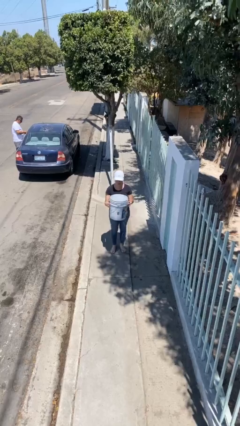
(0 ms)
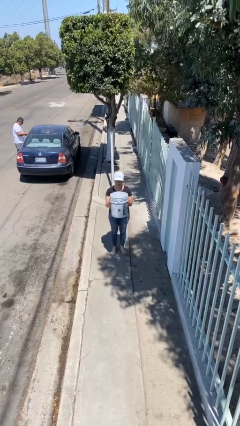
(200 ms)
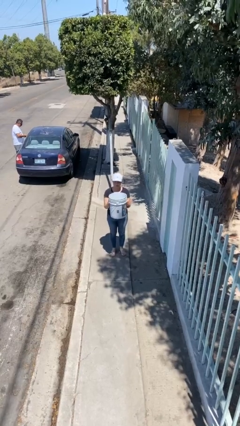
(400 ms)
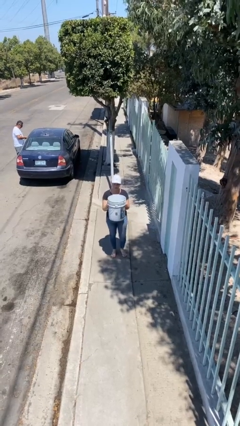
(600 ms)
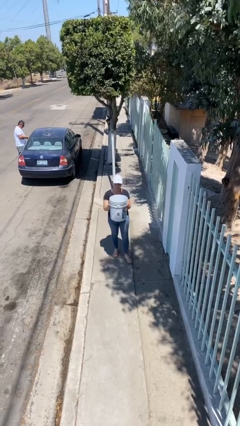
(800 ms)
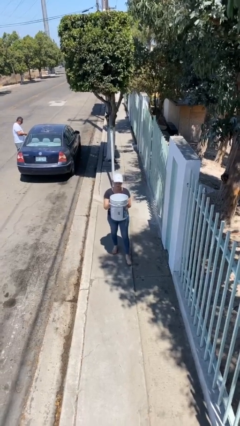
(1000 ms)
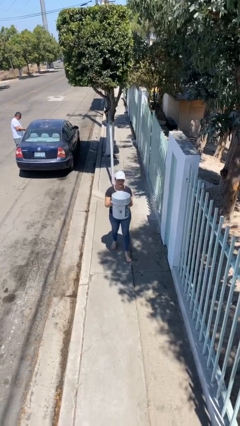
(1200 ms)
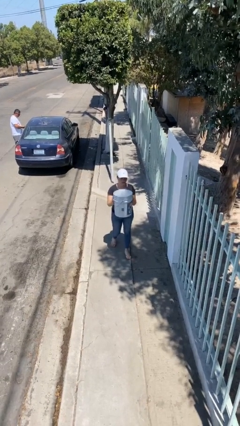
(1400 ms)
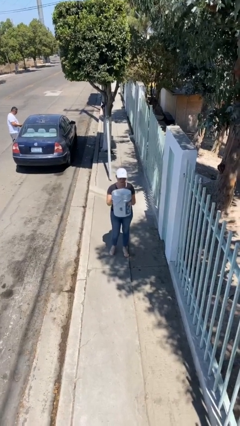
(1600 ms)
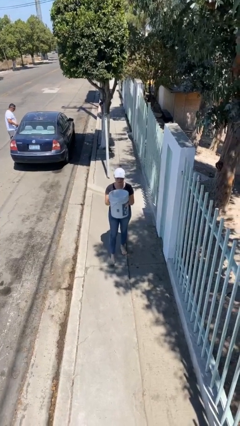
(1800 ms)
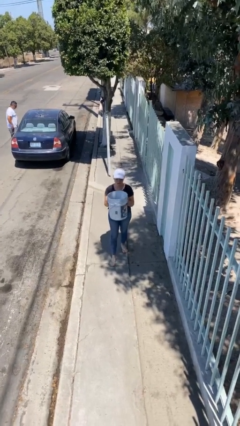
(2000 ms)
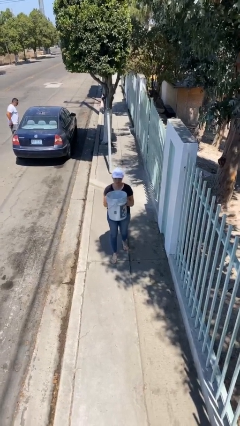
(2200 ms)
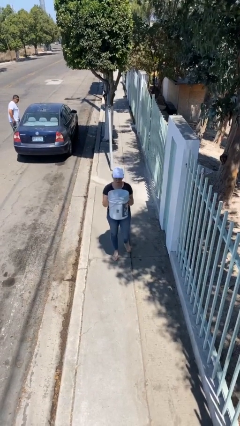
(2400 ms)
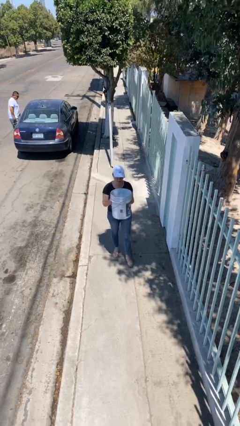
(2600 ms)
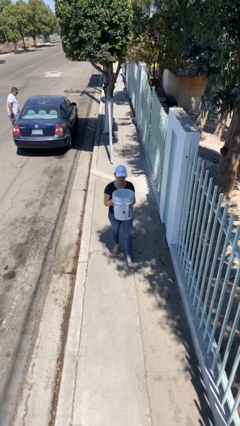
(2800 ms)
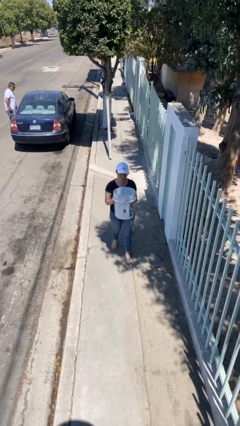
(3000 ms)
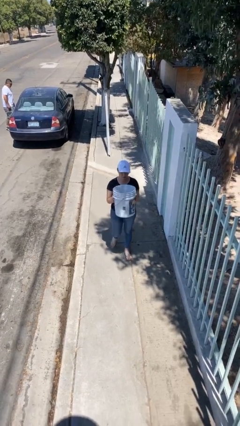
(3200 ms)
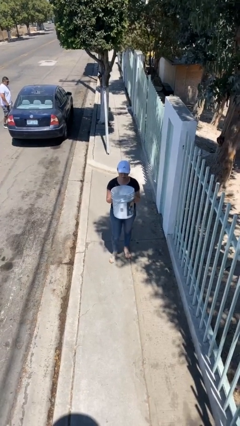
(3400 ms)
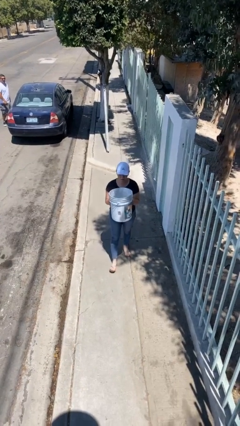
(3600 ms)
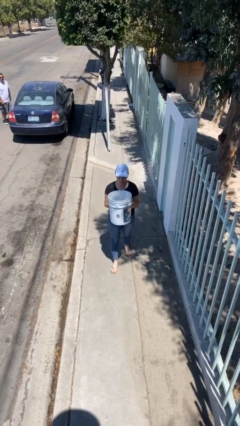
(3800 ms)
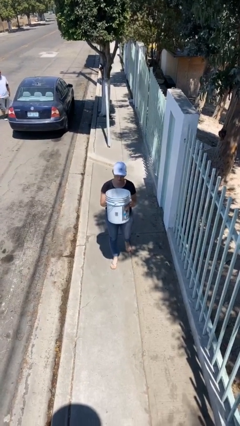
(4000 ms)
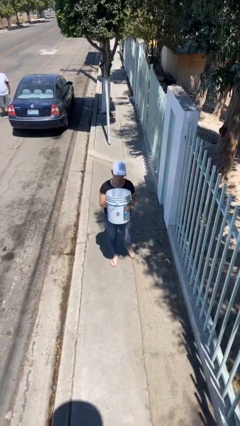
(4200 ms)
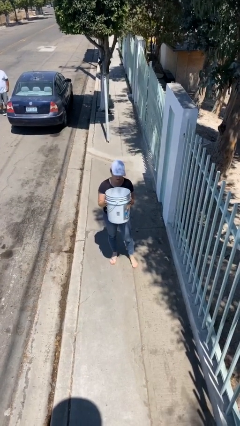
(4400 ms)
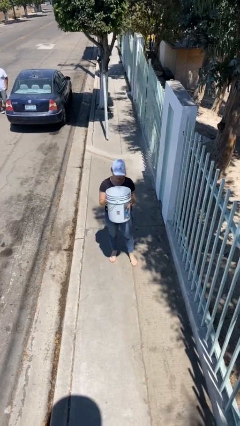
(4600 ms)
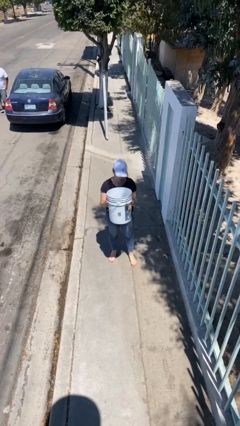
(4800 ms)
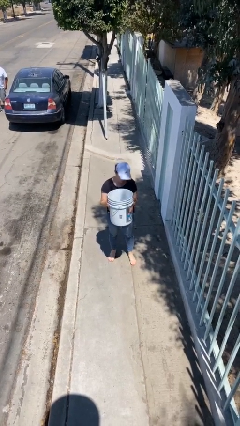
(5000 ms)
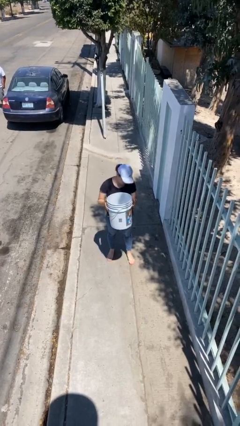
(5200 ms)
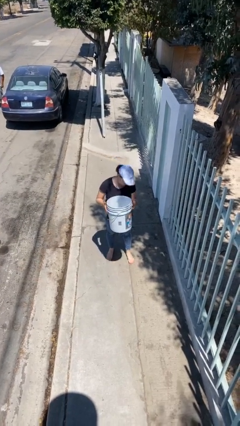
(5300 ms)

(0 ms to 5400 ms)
person carries heavy object

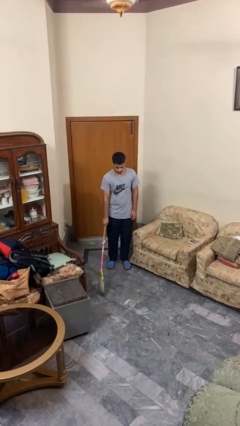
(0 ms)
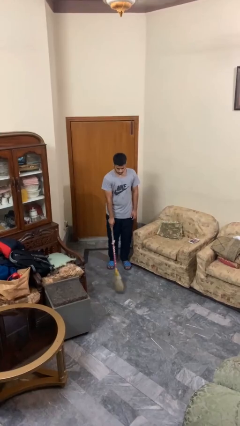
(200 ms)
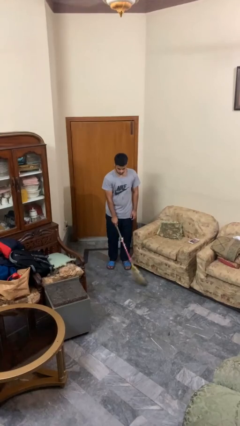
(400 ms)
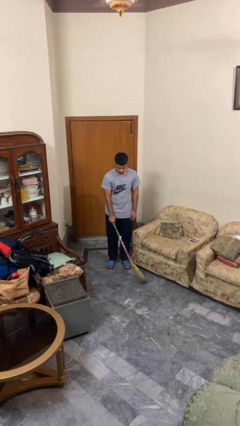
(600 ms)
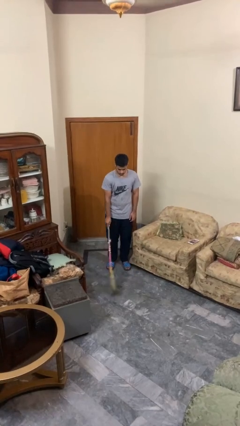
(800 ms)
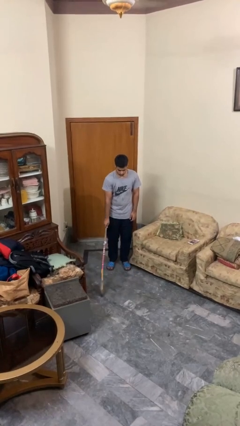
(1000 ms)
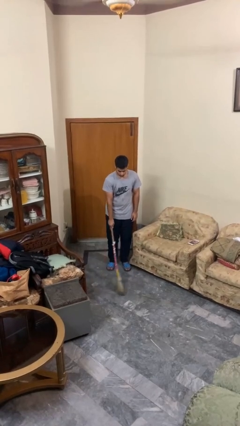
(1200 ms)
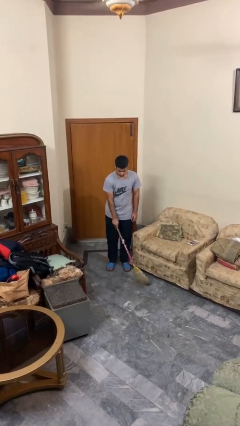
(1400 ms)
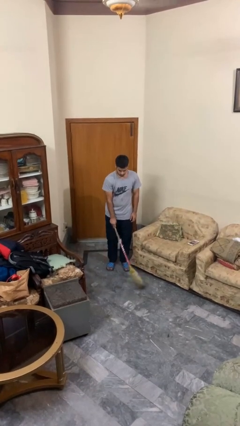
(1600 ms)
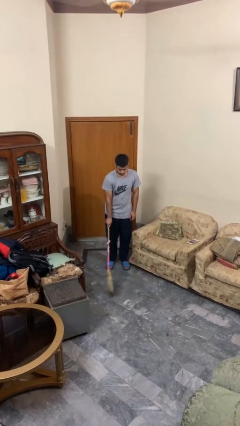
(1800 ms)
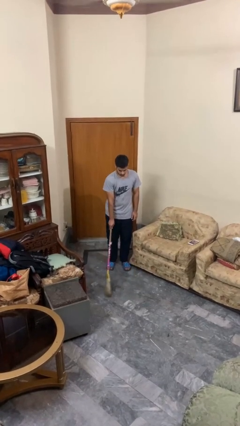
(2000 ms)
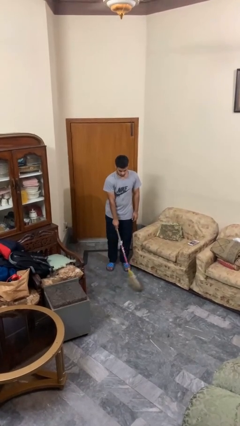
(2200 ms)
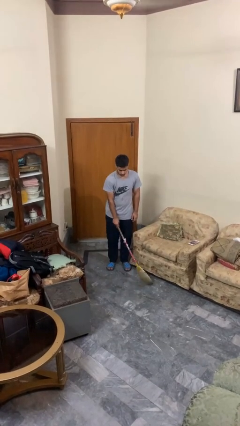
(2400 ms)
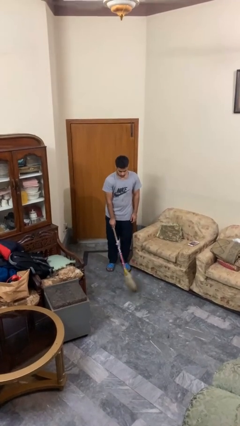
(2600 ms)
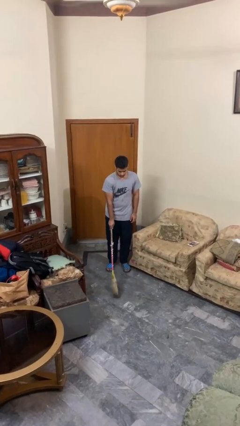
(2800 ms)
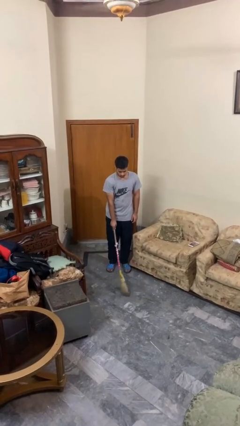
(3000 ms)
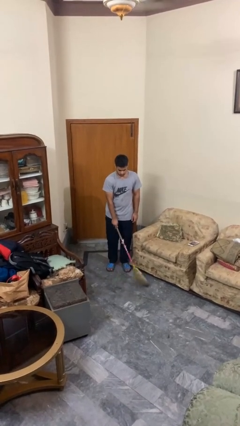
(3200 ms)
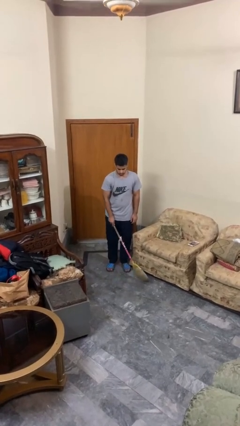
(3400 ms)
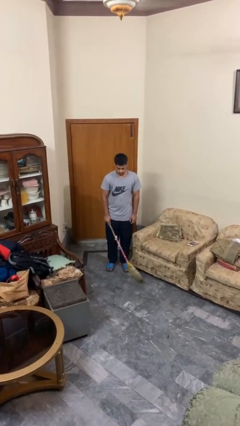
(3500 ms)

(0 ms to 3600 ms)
person sweeps floor

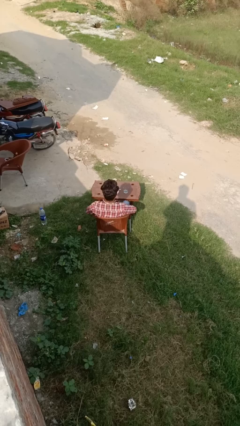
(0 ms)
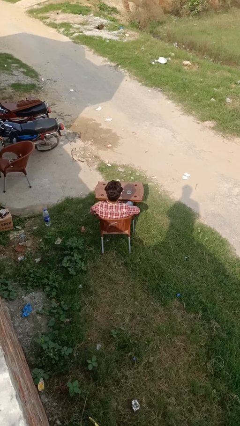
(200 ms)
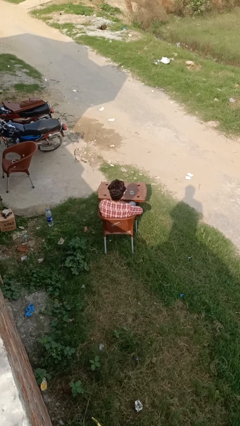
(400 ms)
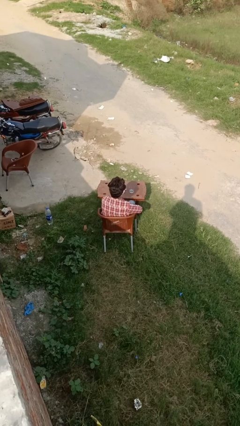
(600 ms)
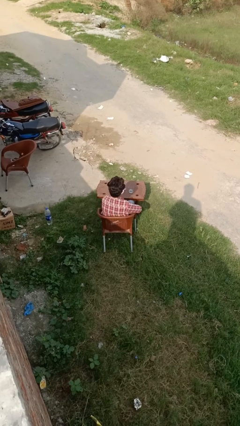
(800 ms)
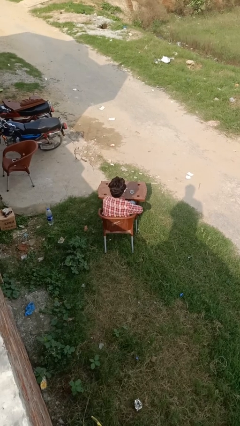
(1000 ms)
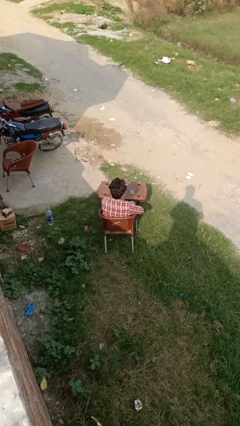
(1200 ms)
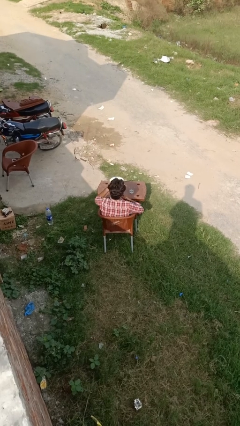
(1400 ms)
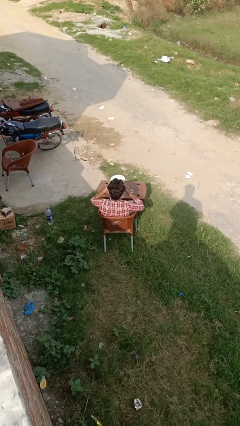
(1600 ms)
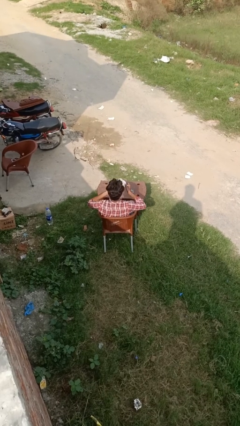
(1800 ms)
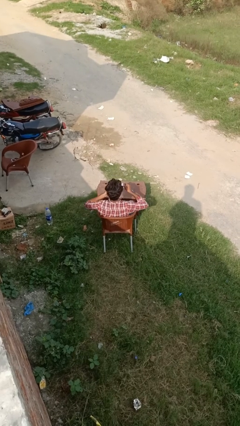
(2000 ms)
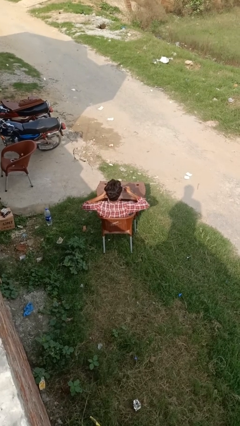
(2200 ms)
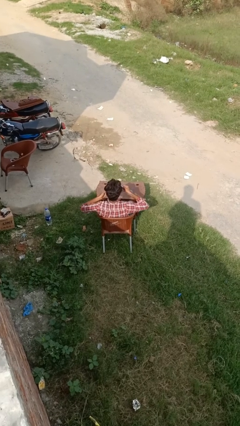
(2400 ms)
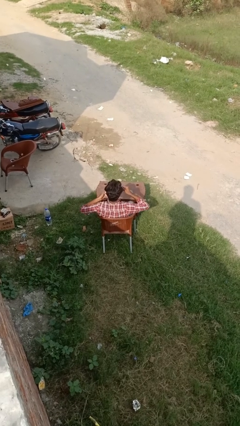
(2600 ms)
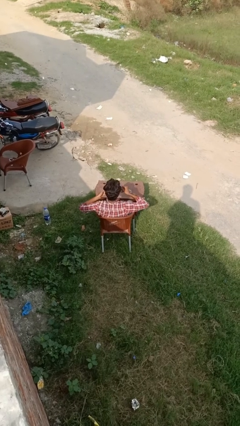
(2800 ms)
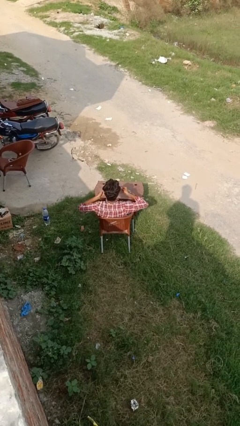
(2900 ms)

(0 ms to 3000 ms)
person eats with utensil

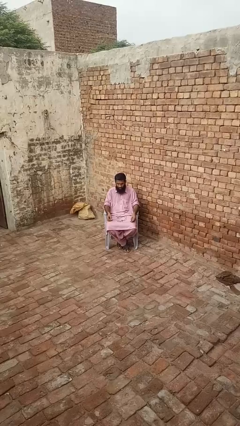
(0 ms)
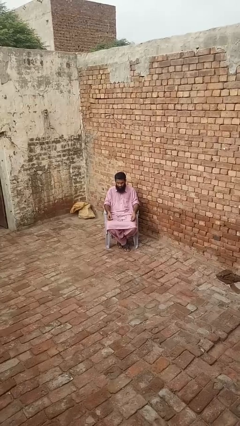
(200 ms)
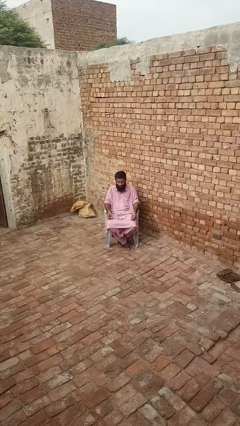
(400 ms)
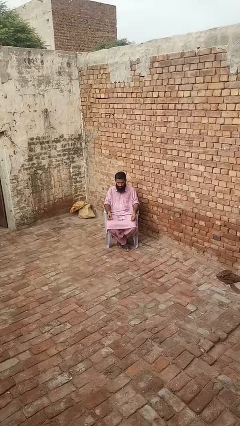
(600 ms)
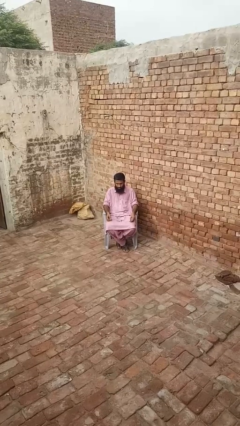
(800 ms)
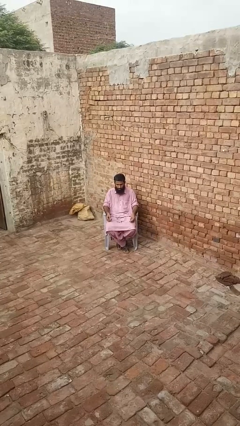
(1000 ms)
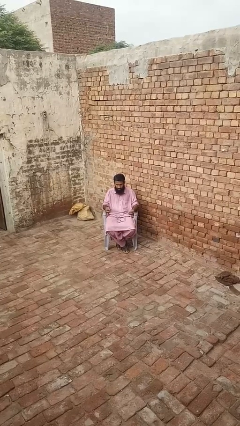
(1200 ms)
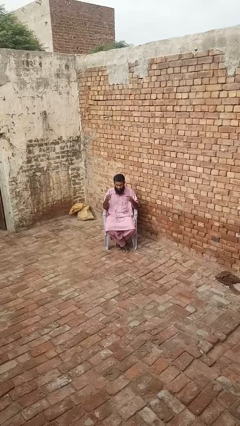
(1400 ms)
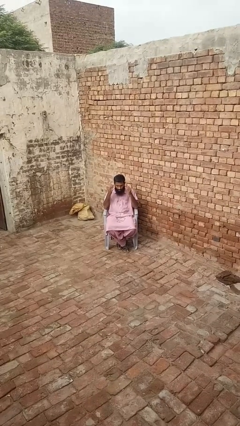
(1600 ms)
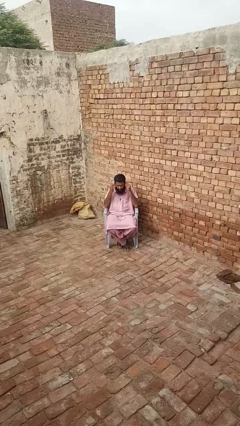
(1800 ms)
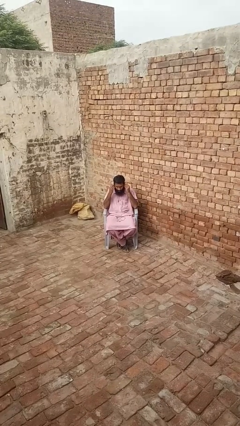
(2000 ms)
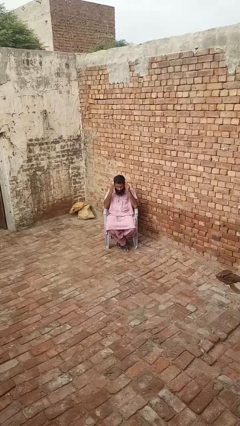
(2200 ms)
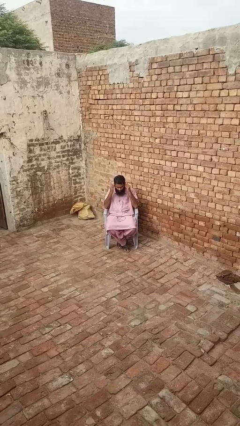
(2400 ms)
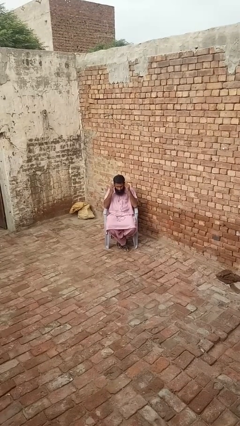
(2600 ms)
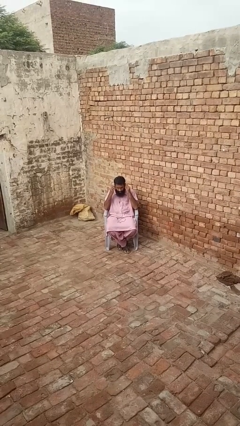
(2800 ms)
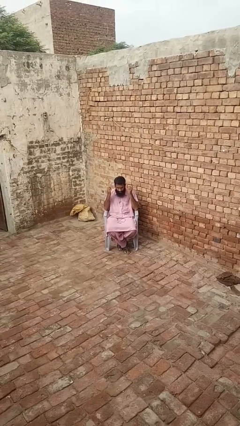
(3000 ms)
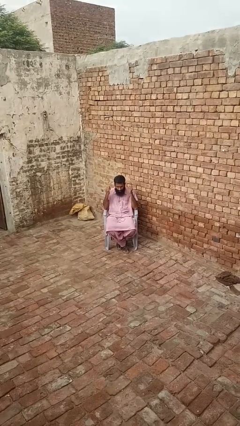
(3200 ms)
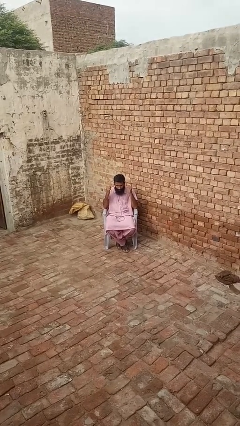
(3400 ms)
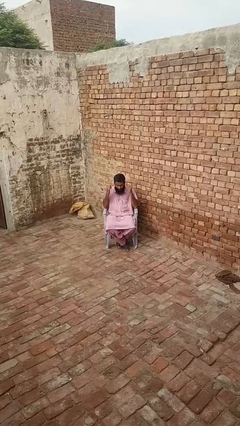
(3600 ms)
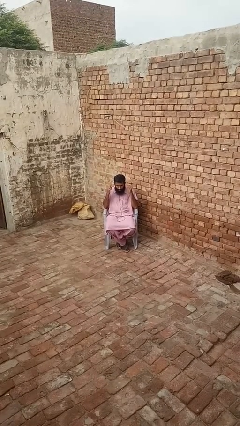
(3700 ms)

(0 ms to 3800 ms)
person puts on headphones

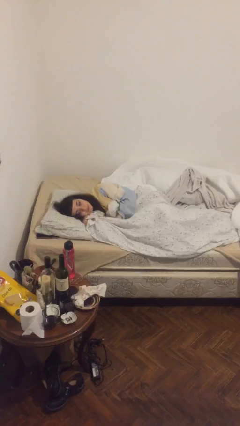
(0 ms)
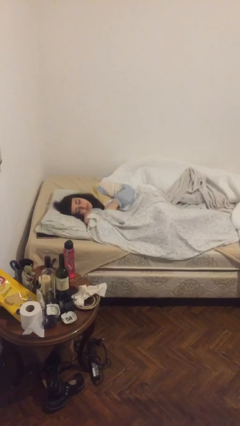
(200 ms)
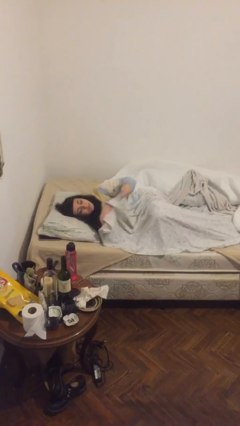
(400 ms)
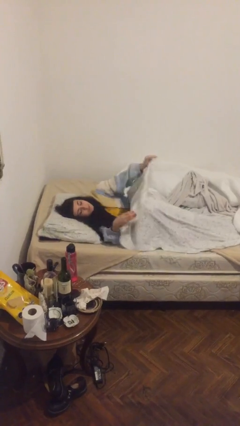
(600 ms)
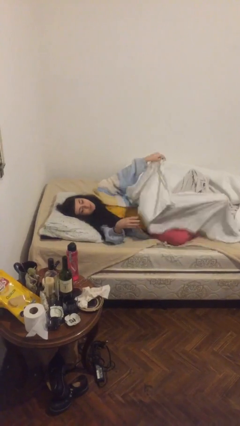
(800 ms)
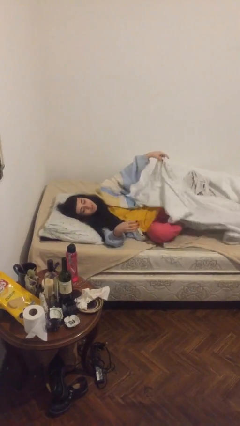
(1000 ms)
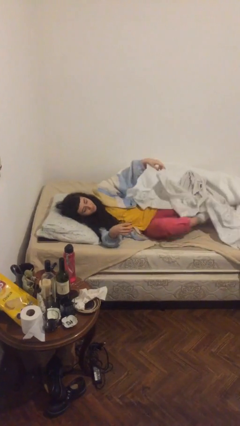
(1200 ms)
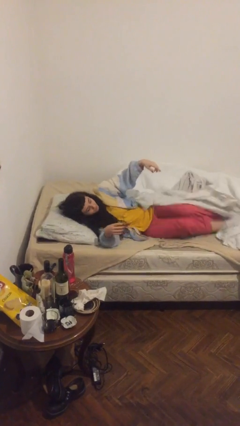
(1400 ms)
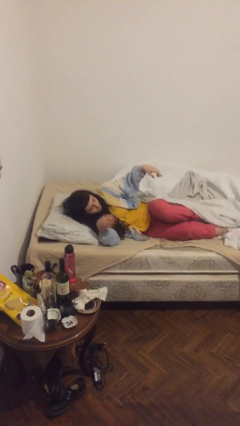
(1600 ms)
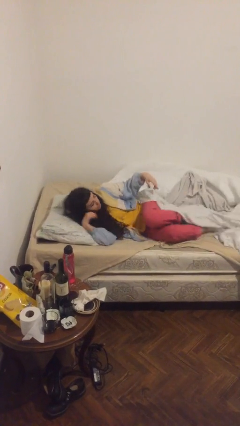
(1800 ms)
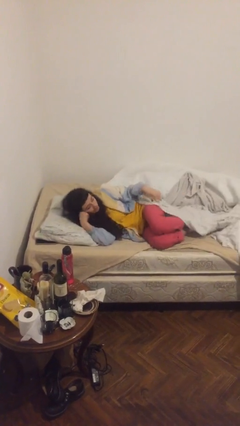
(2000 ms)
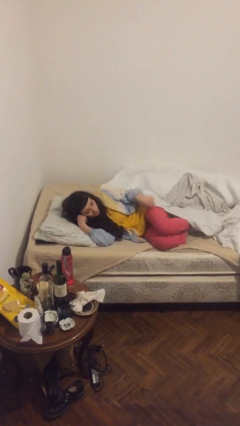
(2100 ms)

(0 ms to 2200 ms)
person uncovers with bedsheets
